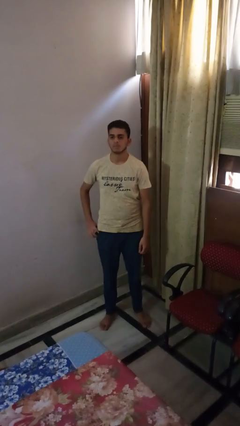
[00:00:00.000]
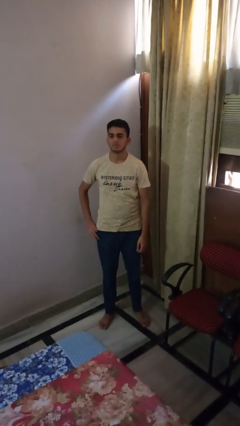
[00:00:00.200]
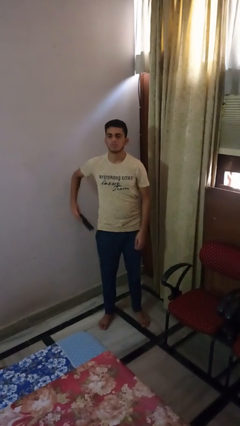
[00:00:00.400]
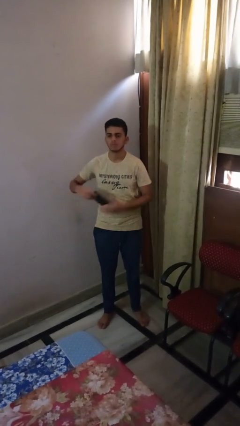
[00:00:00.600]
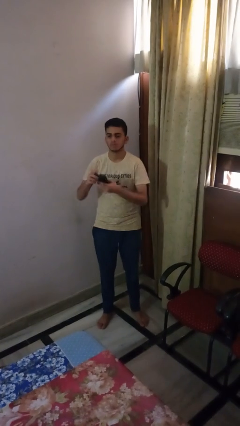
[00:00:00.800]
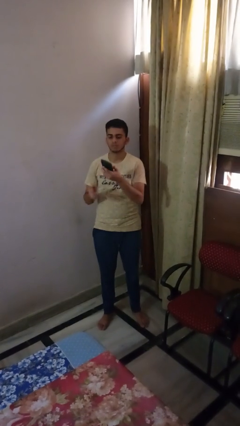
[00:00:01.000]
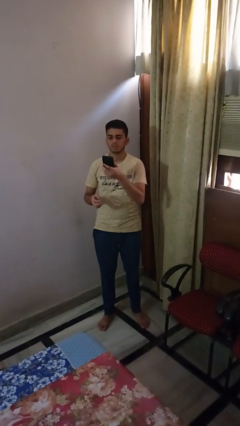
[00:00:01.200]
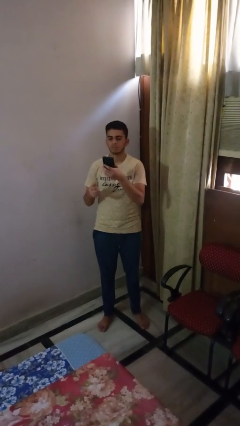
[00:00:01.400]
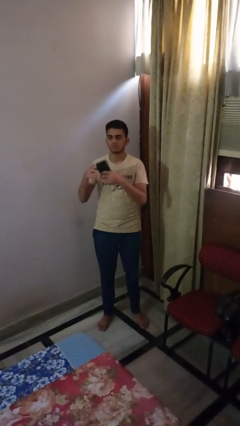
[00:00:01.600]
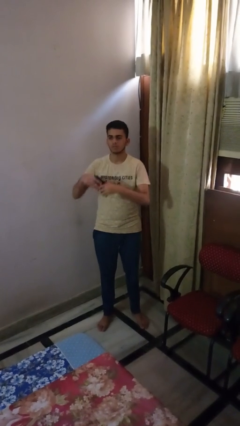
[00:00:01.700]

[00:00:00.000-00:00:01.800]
person takes phone from pocket

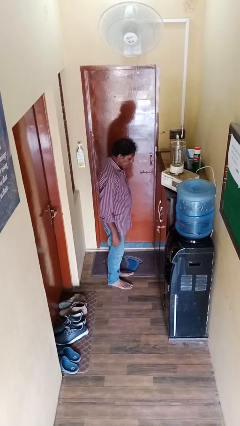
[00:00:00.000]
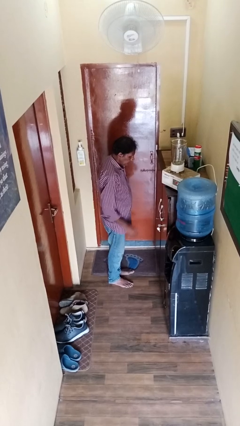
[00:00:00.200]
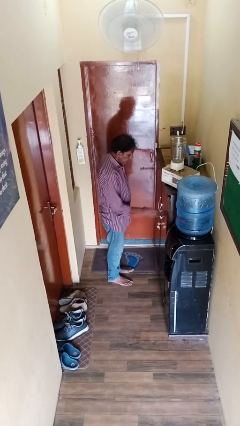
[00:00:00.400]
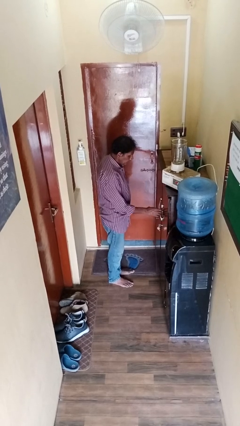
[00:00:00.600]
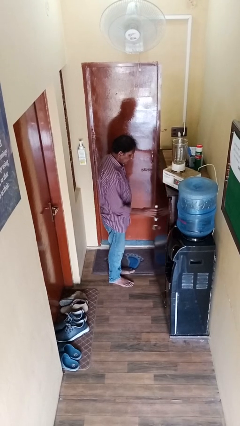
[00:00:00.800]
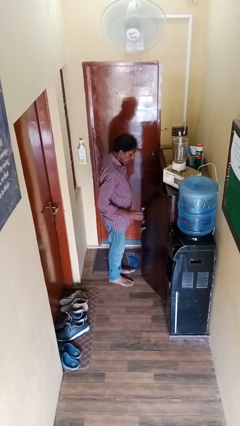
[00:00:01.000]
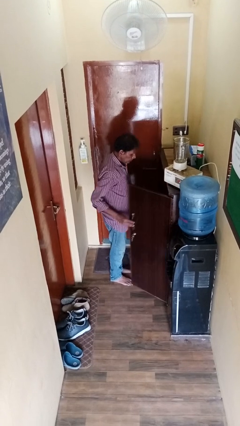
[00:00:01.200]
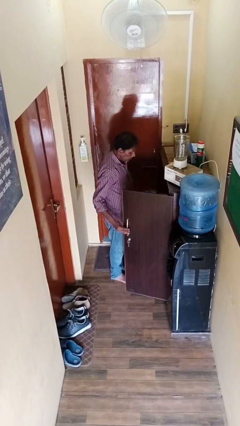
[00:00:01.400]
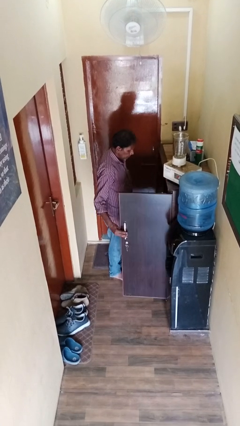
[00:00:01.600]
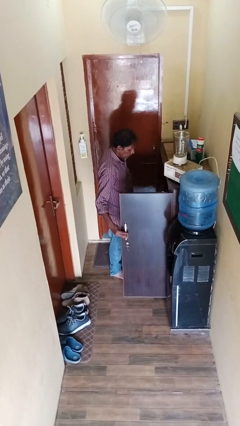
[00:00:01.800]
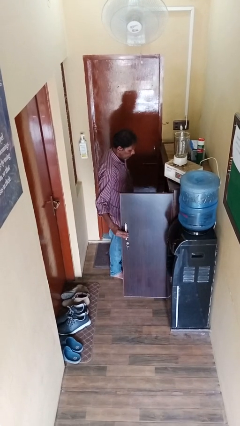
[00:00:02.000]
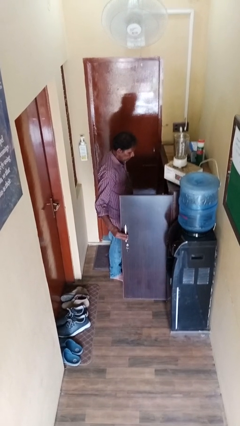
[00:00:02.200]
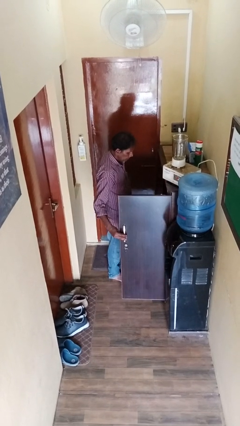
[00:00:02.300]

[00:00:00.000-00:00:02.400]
person opens cabinet

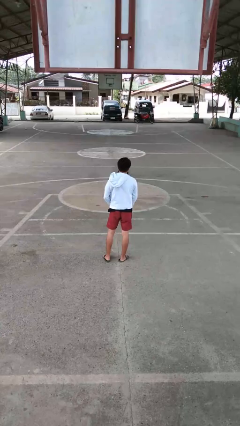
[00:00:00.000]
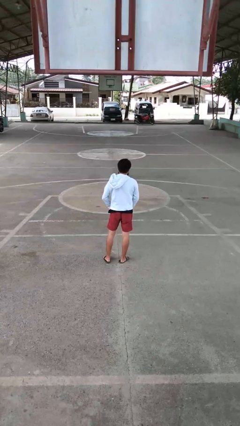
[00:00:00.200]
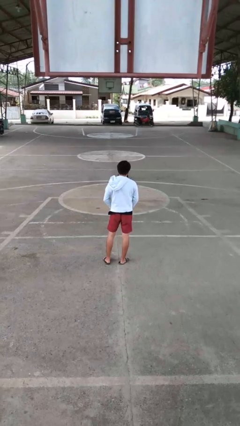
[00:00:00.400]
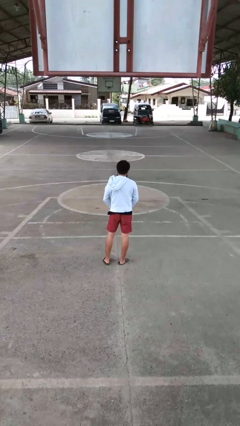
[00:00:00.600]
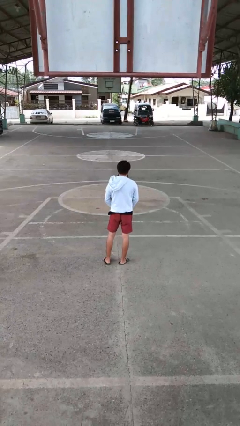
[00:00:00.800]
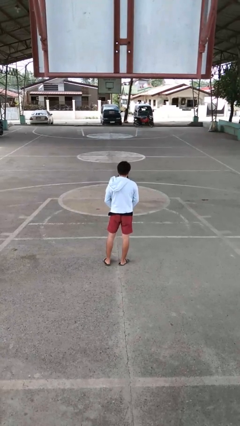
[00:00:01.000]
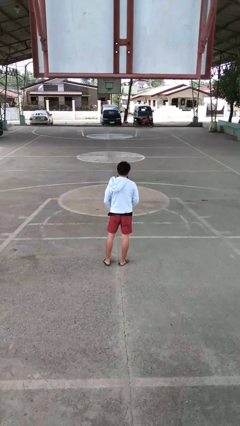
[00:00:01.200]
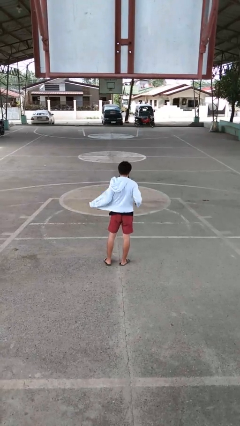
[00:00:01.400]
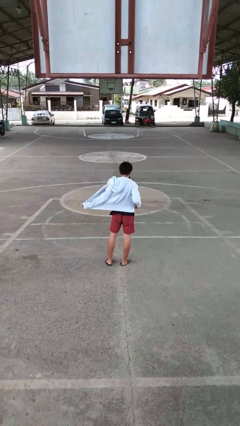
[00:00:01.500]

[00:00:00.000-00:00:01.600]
person unzips jacket

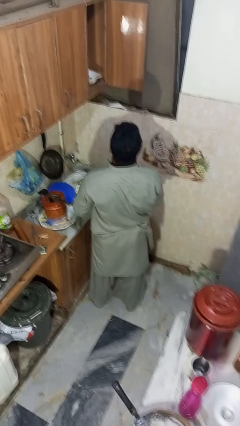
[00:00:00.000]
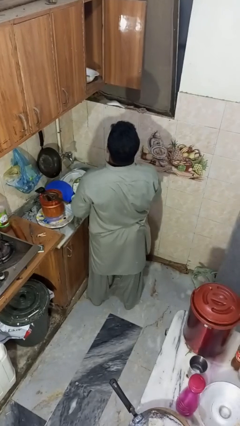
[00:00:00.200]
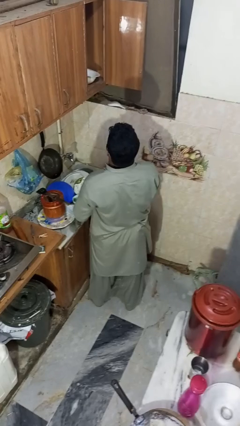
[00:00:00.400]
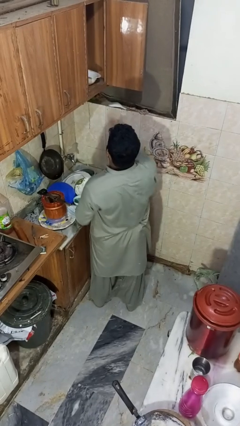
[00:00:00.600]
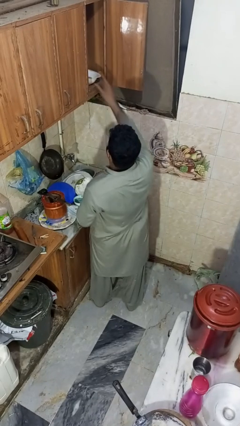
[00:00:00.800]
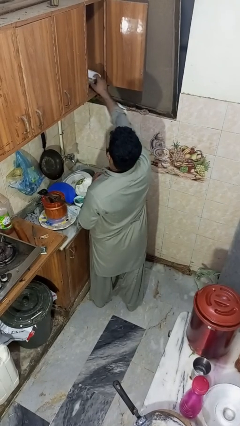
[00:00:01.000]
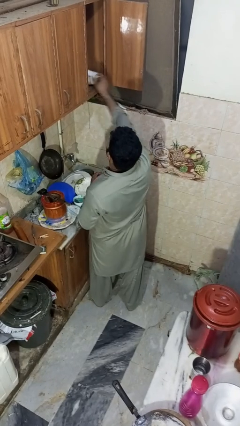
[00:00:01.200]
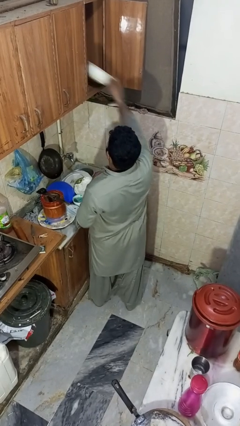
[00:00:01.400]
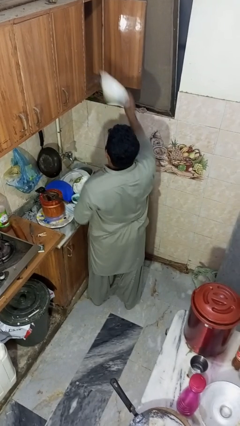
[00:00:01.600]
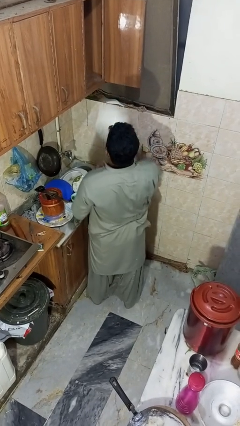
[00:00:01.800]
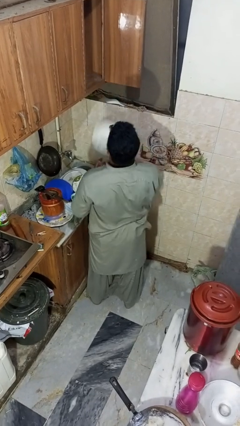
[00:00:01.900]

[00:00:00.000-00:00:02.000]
person takes object from cabinet

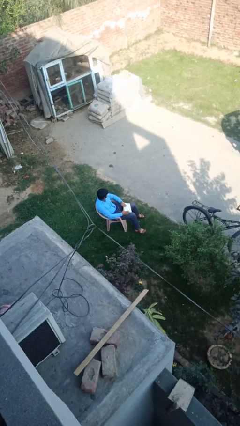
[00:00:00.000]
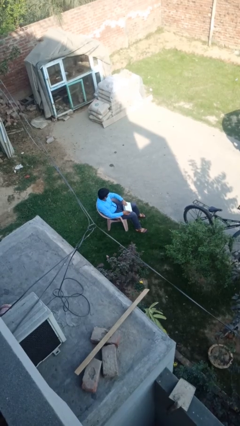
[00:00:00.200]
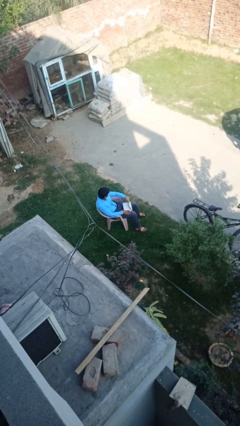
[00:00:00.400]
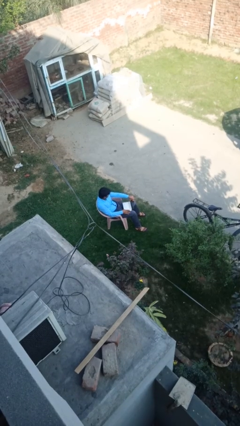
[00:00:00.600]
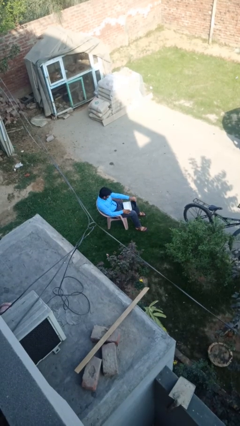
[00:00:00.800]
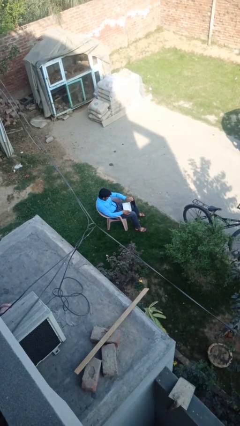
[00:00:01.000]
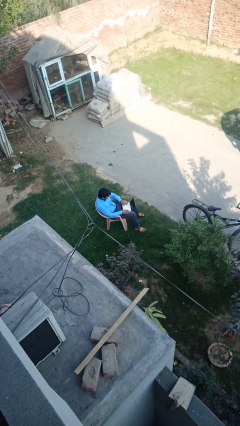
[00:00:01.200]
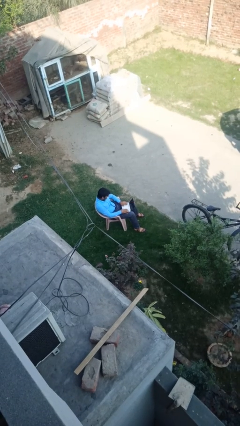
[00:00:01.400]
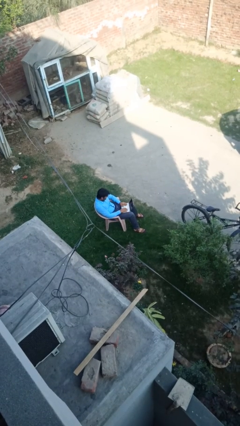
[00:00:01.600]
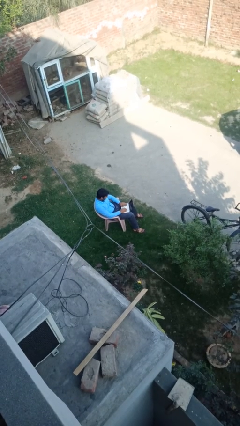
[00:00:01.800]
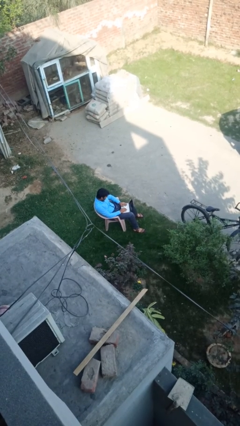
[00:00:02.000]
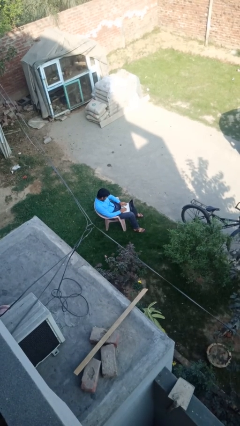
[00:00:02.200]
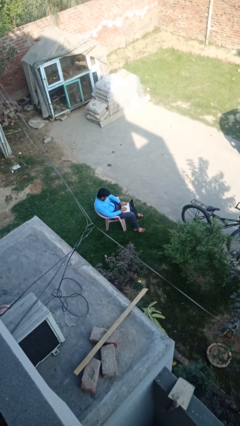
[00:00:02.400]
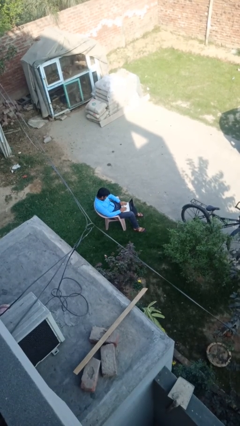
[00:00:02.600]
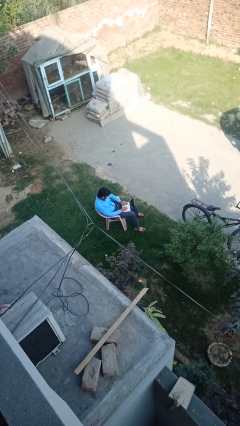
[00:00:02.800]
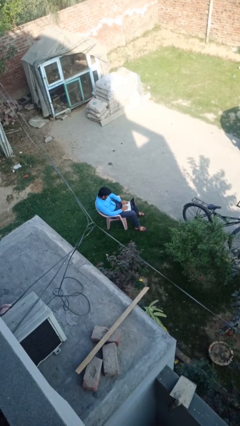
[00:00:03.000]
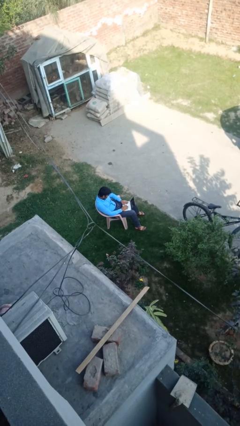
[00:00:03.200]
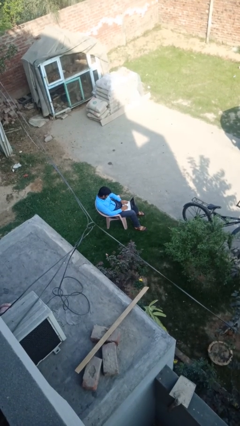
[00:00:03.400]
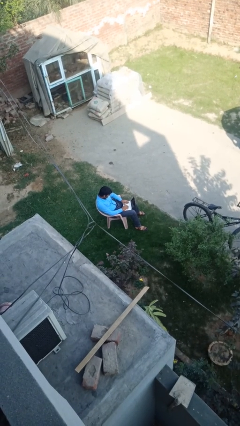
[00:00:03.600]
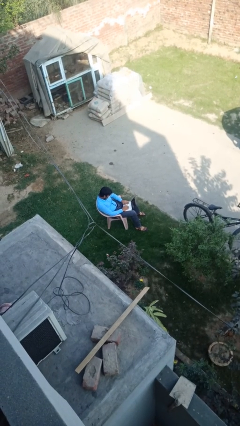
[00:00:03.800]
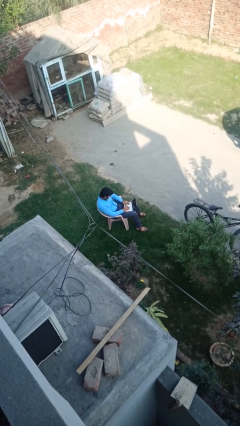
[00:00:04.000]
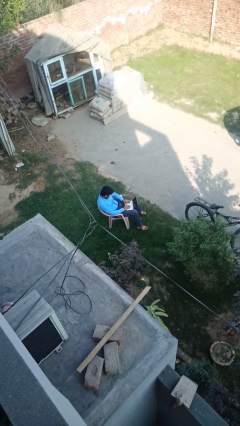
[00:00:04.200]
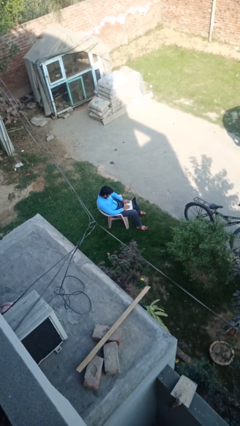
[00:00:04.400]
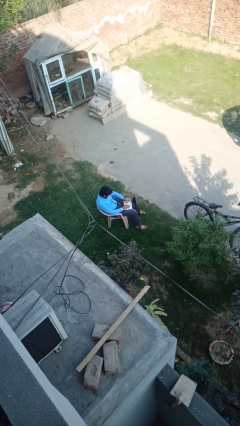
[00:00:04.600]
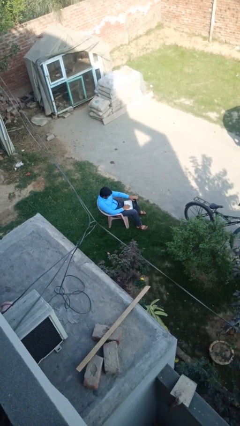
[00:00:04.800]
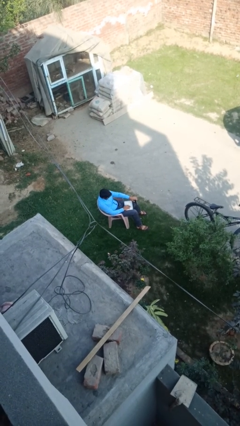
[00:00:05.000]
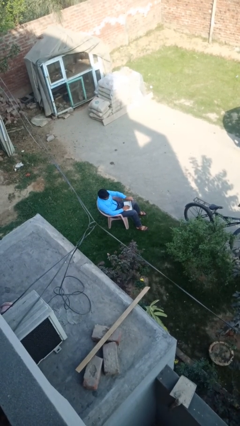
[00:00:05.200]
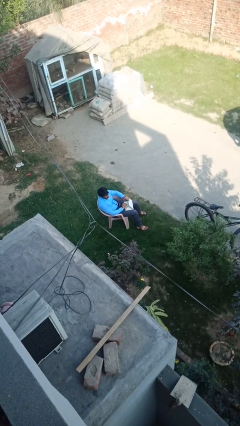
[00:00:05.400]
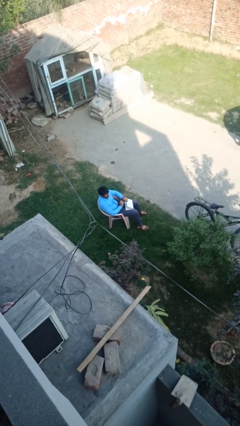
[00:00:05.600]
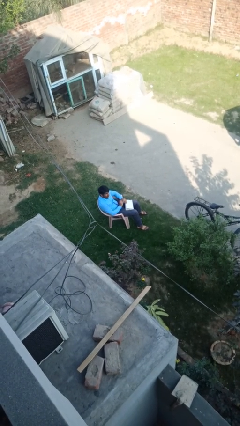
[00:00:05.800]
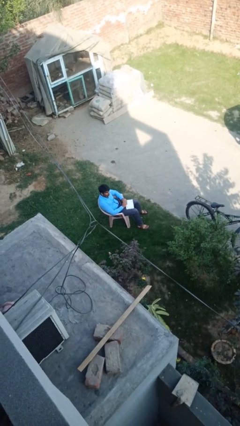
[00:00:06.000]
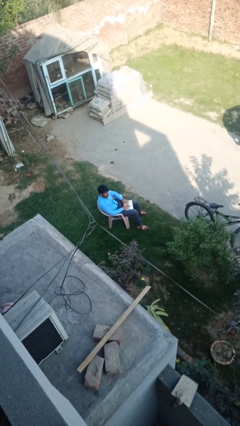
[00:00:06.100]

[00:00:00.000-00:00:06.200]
person interacts with laptop

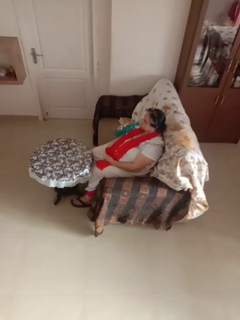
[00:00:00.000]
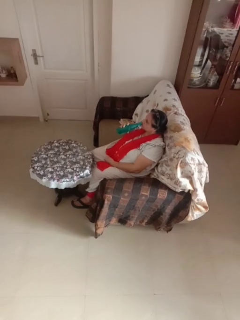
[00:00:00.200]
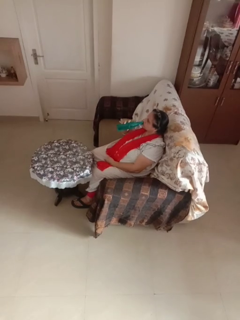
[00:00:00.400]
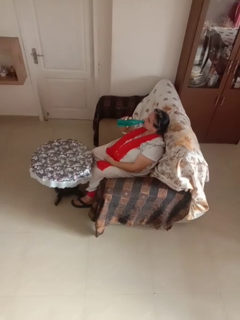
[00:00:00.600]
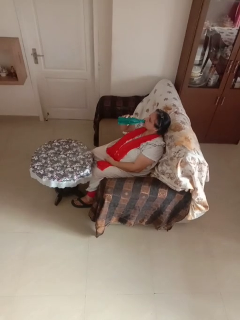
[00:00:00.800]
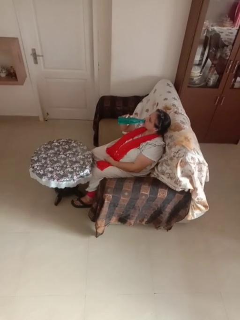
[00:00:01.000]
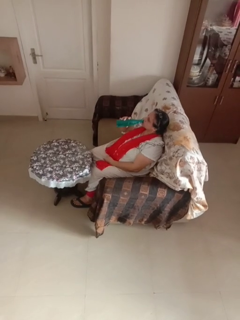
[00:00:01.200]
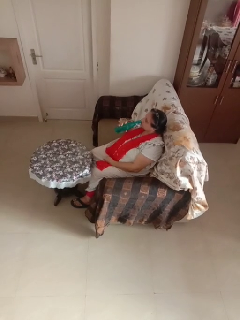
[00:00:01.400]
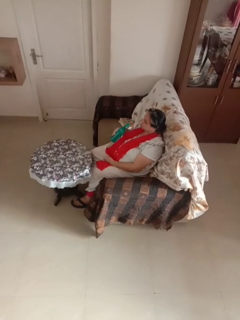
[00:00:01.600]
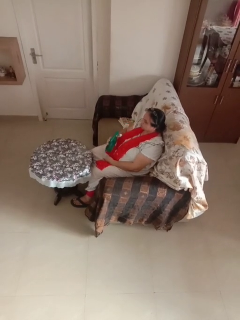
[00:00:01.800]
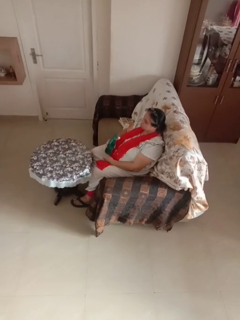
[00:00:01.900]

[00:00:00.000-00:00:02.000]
person drinks from bottle

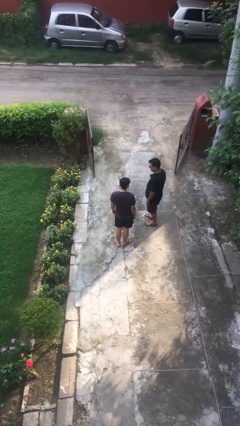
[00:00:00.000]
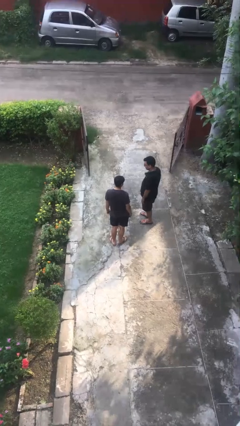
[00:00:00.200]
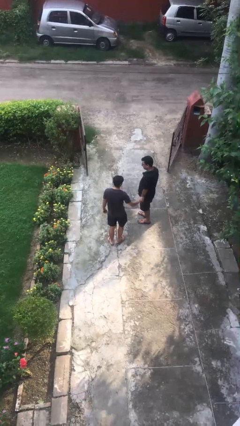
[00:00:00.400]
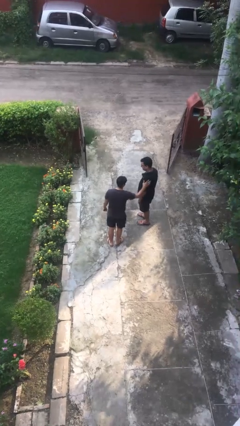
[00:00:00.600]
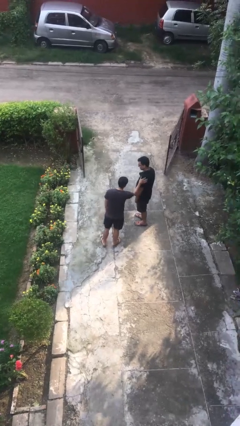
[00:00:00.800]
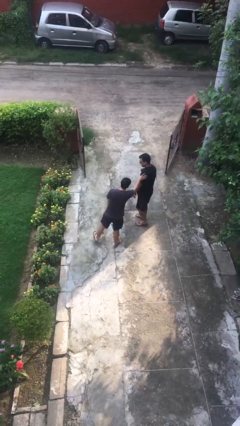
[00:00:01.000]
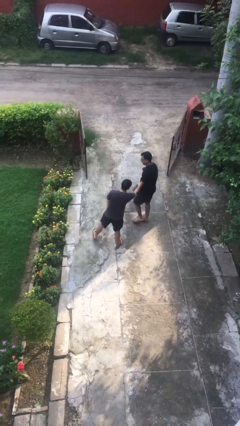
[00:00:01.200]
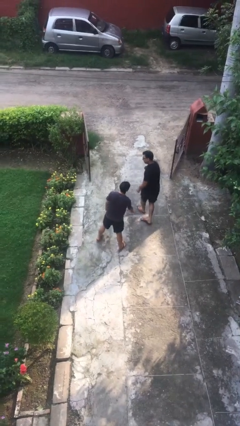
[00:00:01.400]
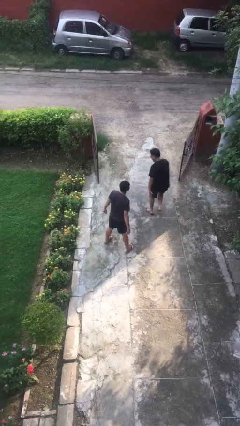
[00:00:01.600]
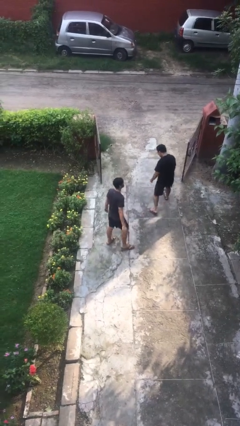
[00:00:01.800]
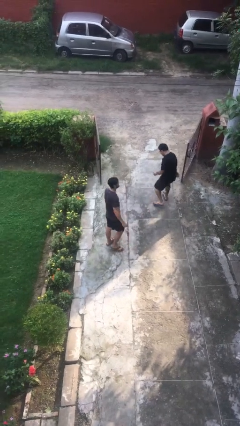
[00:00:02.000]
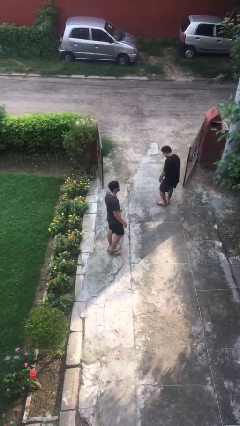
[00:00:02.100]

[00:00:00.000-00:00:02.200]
person shoves person
